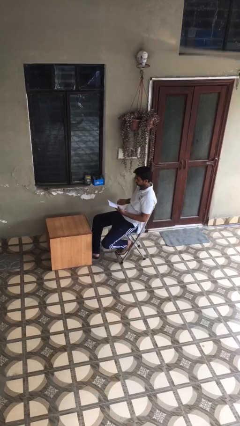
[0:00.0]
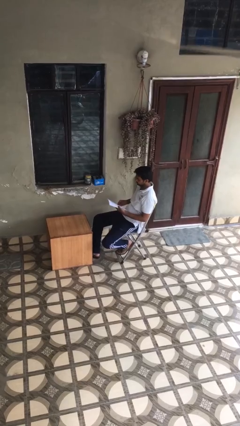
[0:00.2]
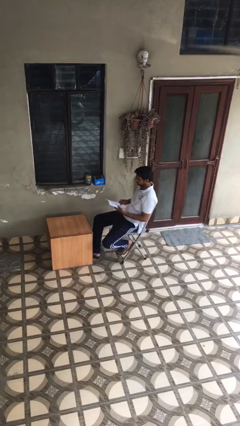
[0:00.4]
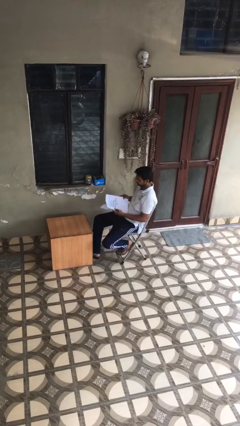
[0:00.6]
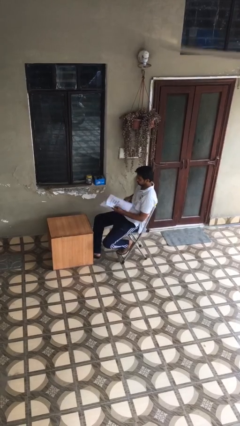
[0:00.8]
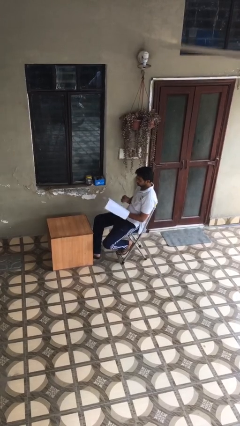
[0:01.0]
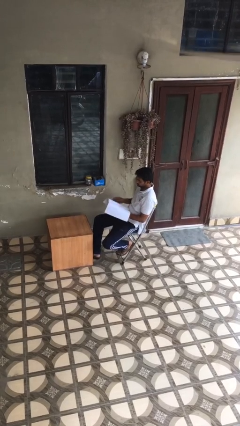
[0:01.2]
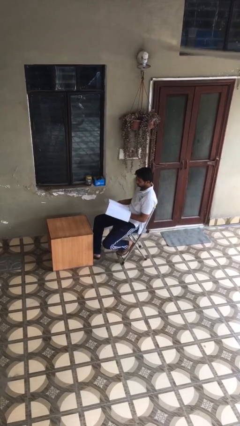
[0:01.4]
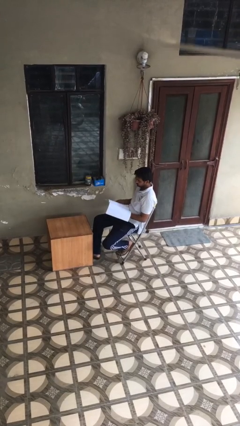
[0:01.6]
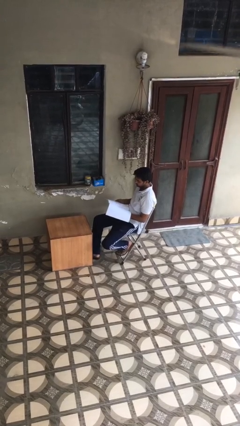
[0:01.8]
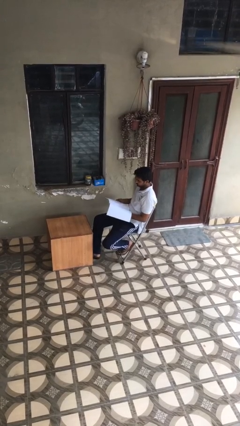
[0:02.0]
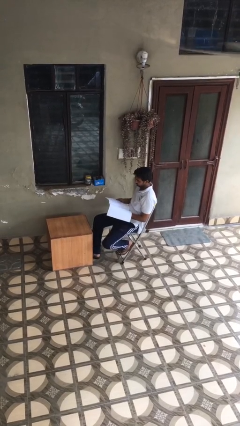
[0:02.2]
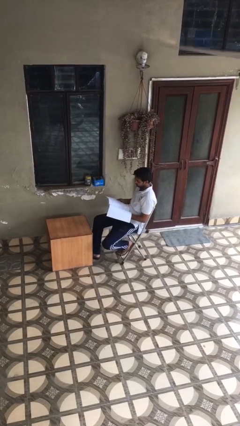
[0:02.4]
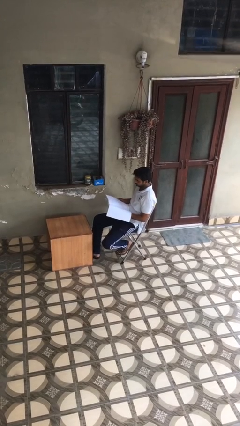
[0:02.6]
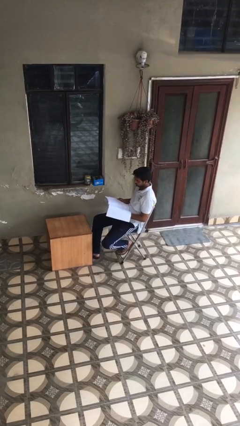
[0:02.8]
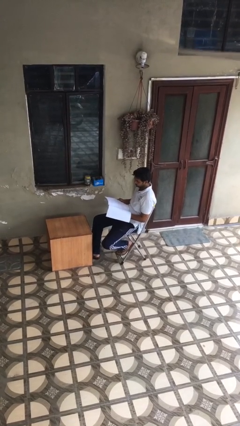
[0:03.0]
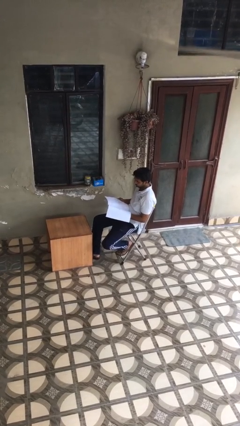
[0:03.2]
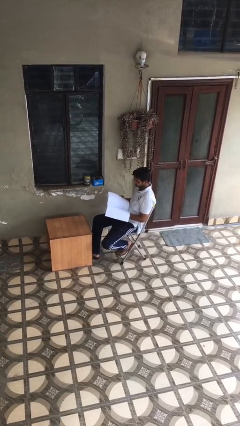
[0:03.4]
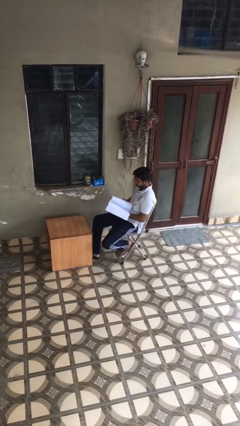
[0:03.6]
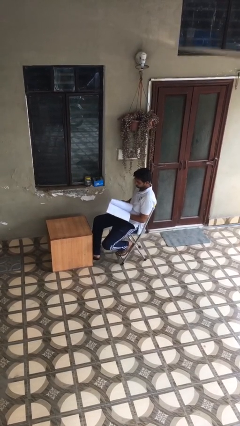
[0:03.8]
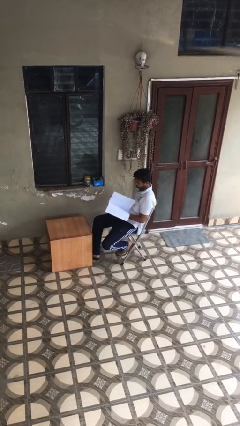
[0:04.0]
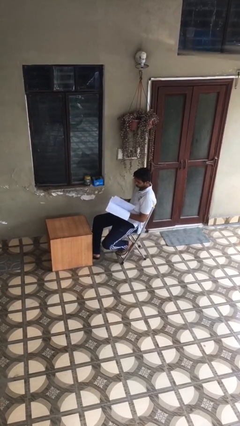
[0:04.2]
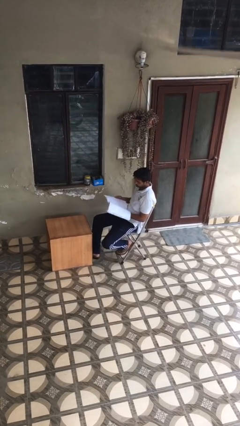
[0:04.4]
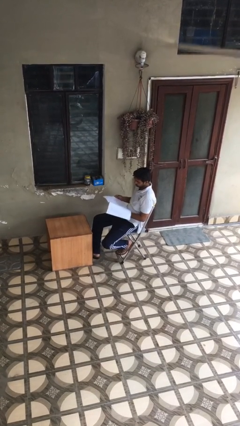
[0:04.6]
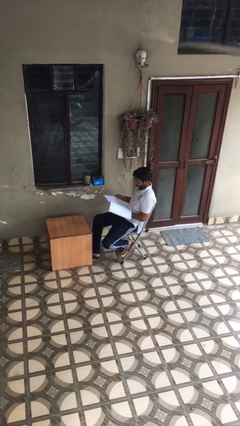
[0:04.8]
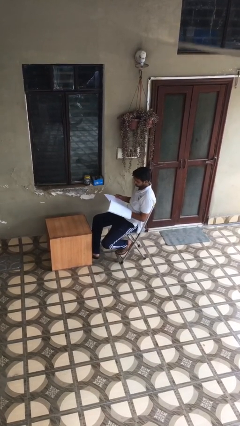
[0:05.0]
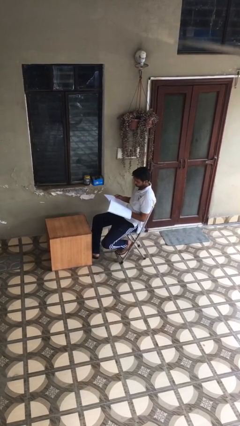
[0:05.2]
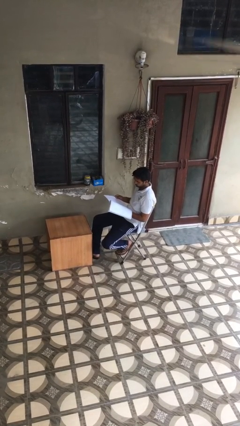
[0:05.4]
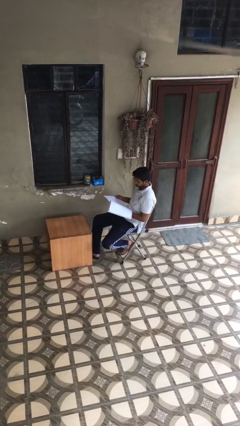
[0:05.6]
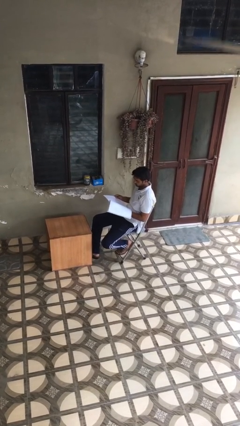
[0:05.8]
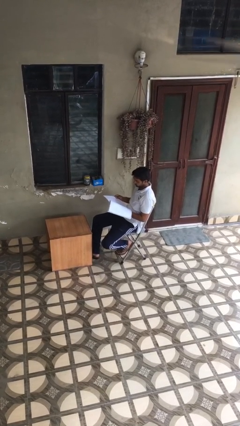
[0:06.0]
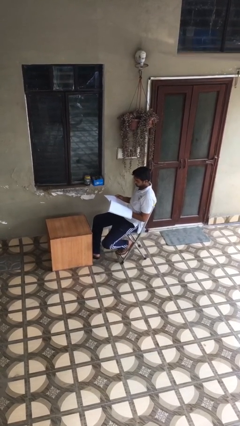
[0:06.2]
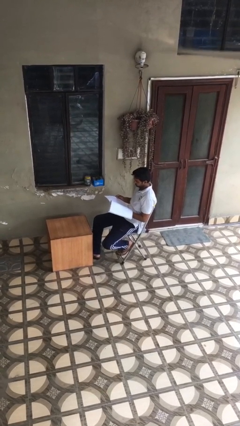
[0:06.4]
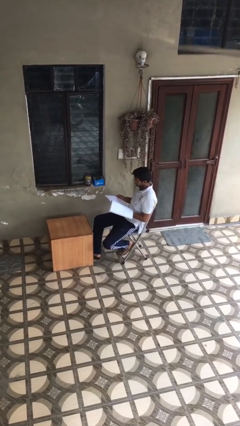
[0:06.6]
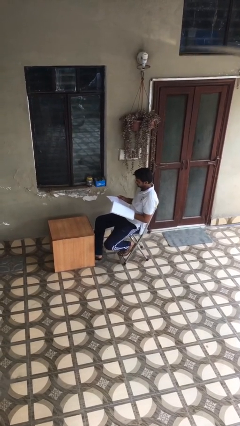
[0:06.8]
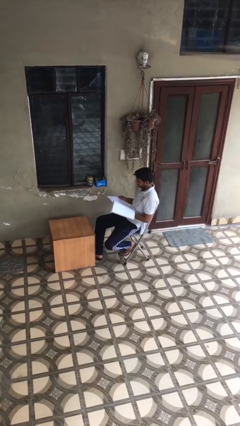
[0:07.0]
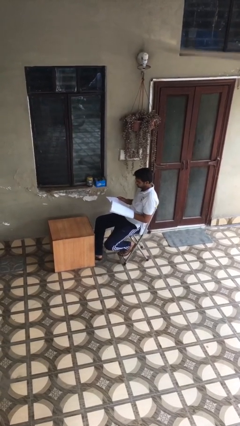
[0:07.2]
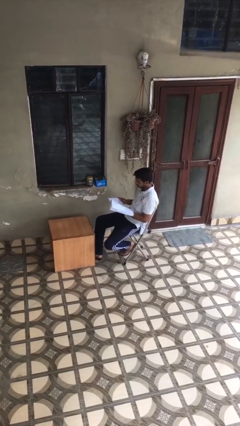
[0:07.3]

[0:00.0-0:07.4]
person reads document

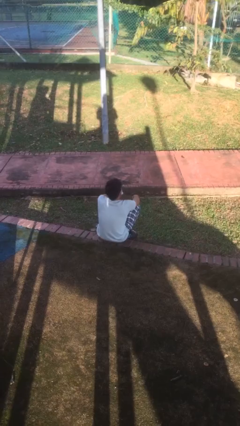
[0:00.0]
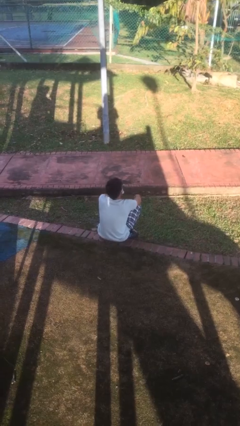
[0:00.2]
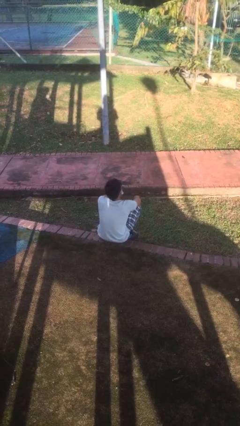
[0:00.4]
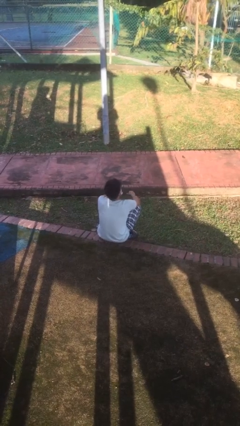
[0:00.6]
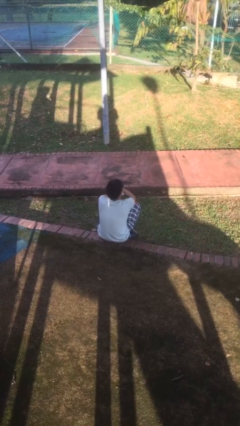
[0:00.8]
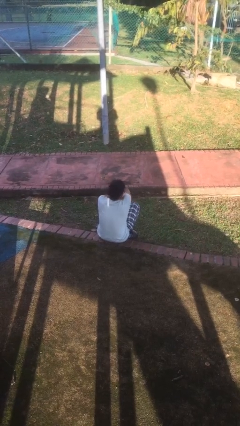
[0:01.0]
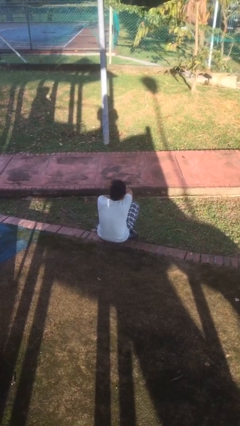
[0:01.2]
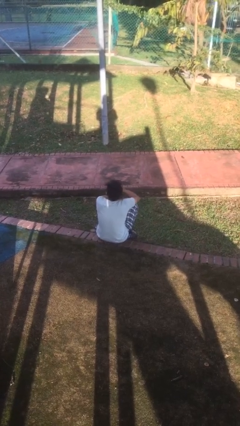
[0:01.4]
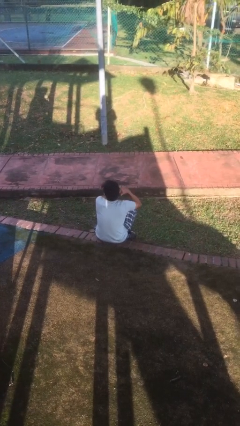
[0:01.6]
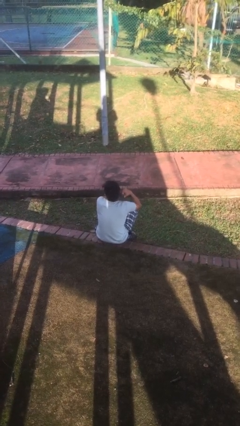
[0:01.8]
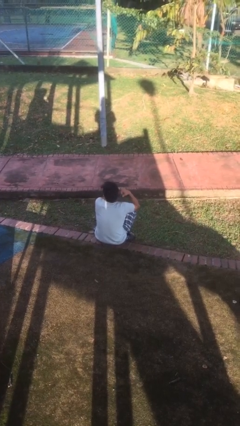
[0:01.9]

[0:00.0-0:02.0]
person gestures cut

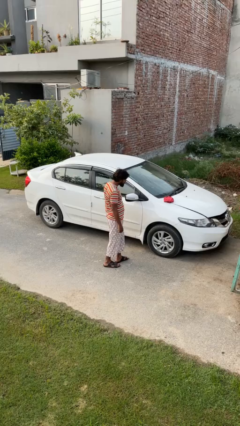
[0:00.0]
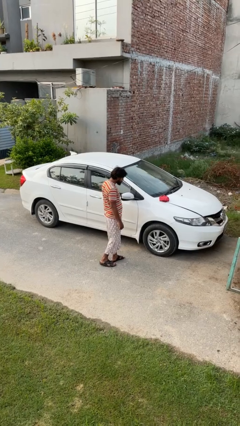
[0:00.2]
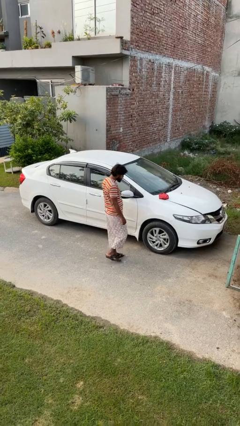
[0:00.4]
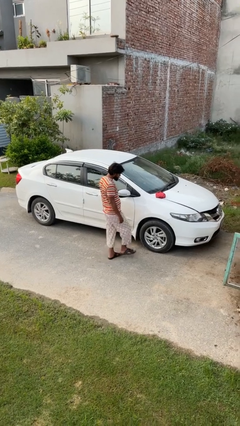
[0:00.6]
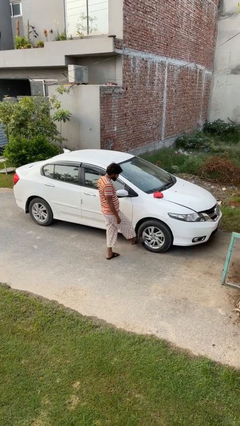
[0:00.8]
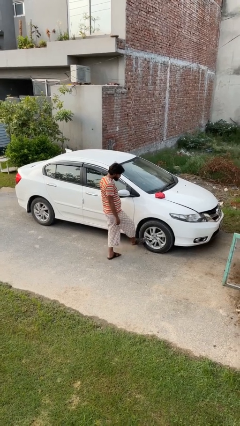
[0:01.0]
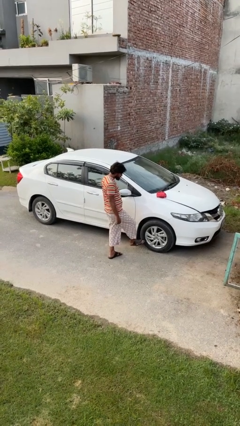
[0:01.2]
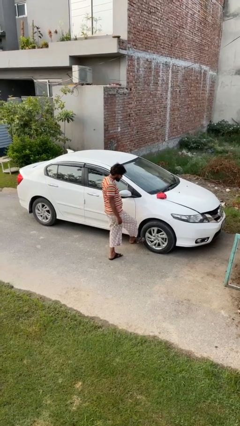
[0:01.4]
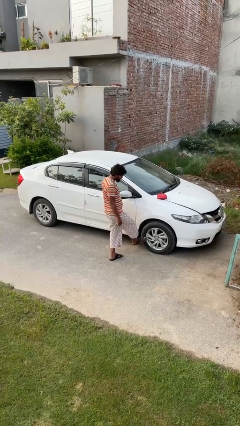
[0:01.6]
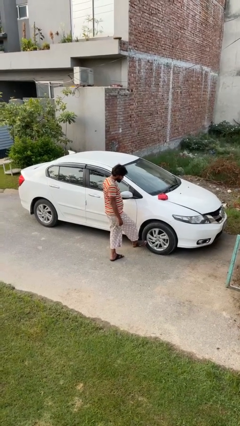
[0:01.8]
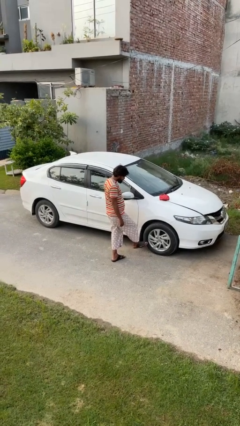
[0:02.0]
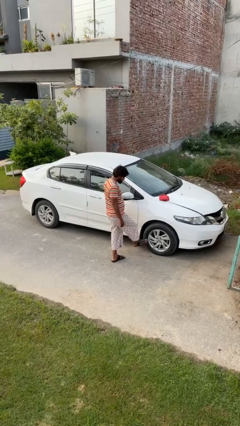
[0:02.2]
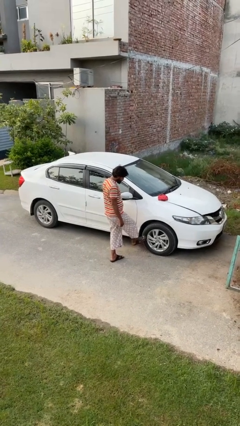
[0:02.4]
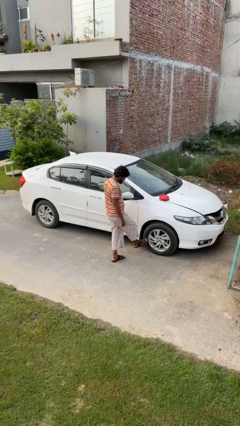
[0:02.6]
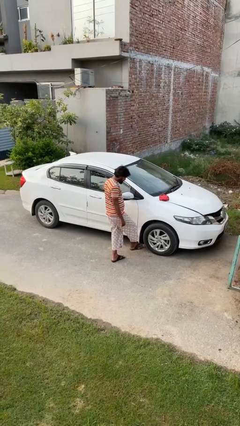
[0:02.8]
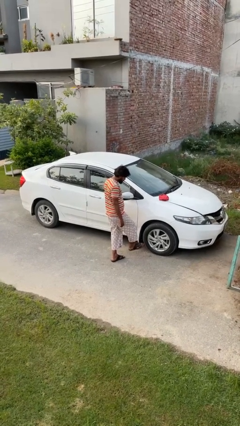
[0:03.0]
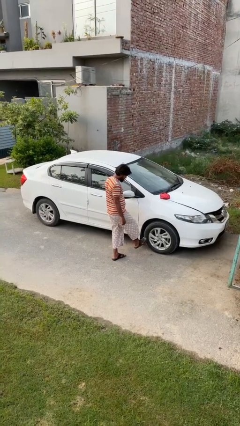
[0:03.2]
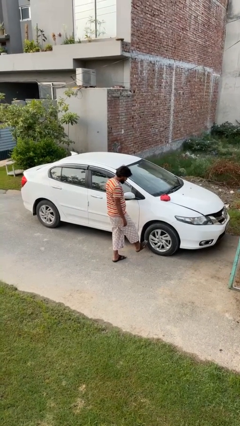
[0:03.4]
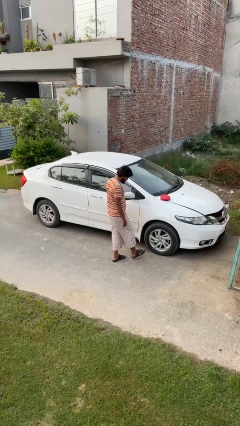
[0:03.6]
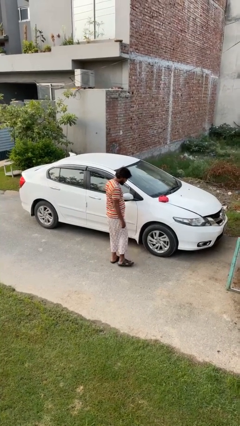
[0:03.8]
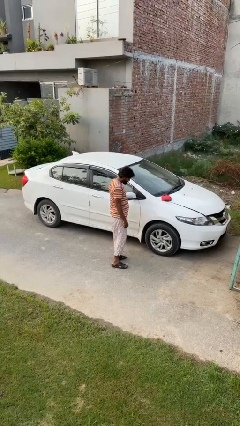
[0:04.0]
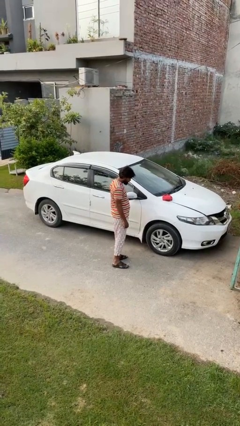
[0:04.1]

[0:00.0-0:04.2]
person kicks car tires

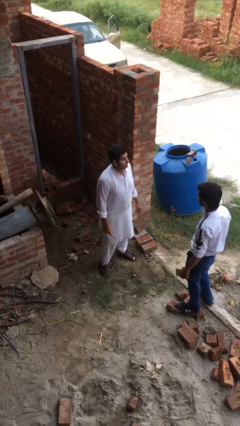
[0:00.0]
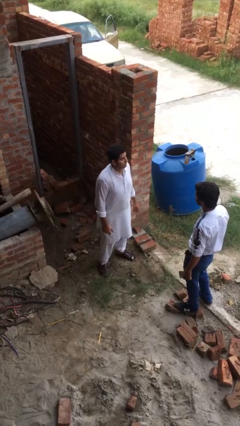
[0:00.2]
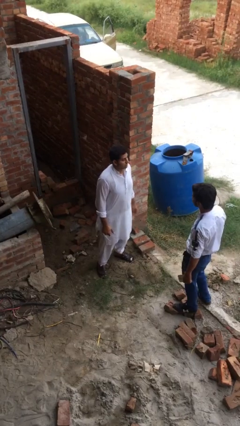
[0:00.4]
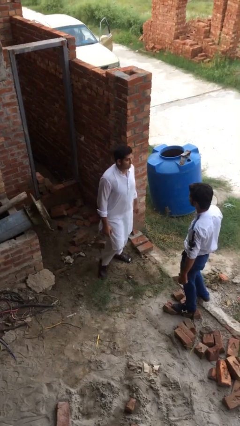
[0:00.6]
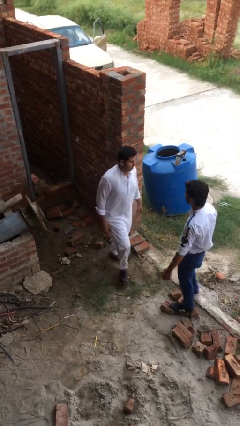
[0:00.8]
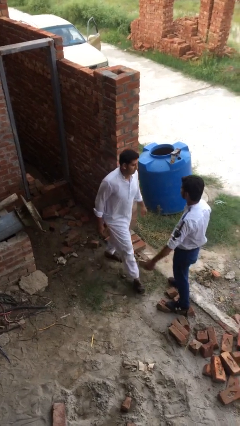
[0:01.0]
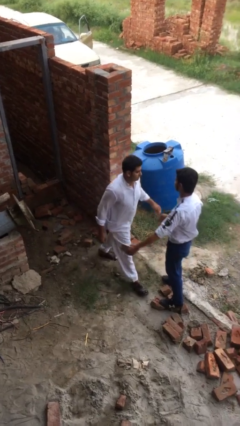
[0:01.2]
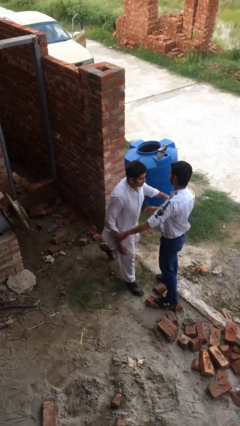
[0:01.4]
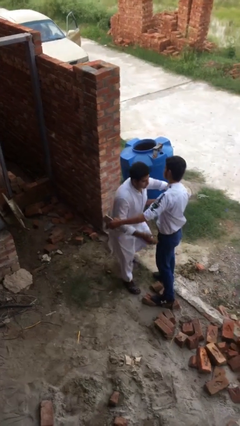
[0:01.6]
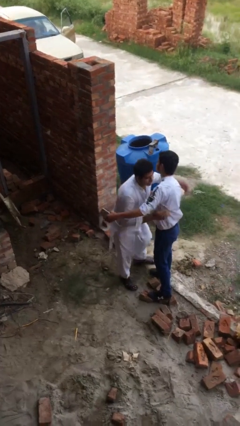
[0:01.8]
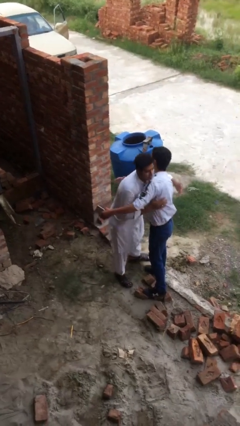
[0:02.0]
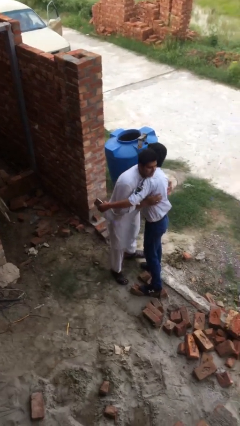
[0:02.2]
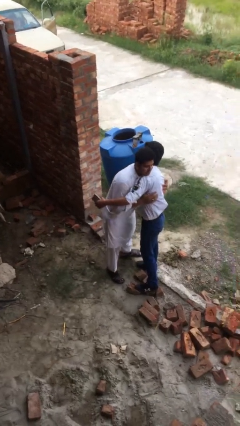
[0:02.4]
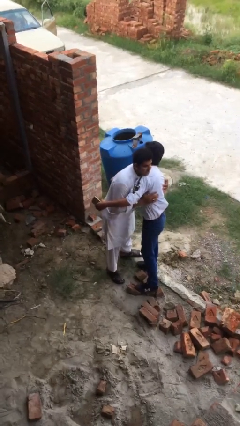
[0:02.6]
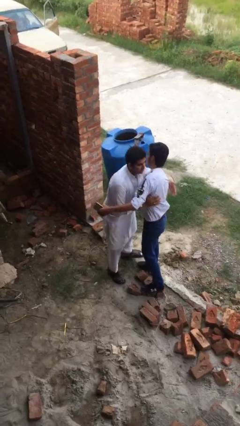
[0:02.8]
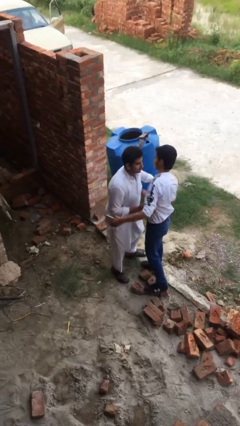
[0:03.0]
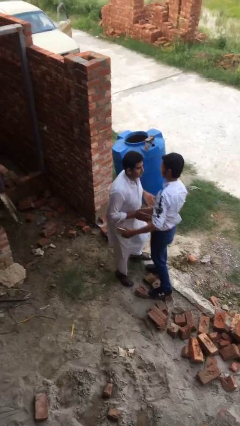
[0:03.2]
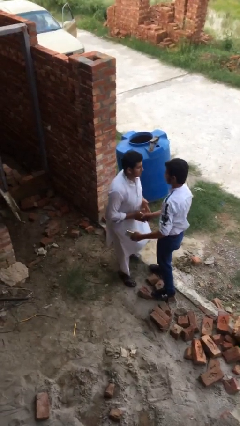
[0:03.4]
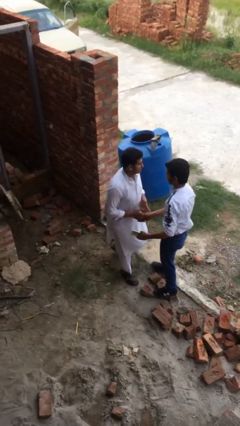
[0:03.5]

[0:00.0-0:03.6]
person embraces person

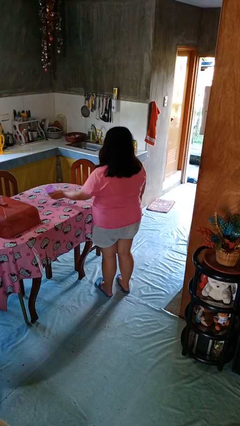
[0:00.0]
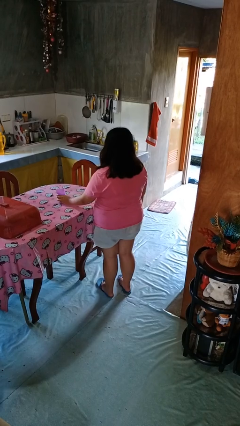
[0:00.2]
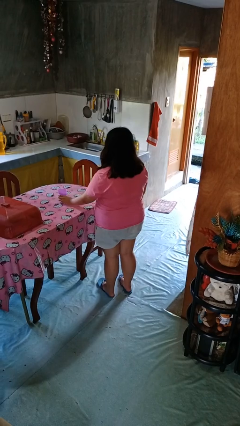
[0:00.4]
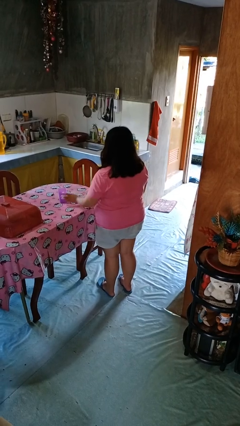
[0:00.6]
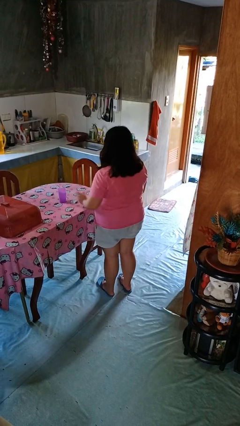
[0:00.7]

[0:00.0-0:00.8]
person sets upright glass
